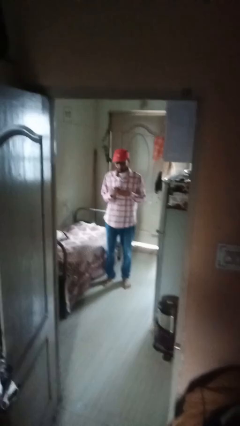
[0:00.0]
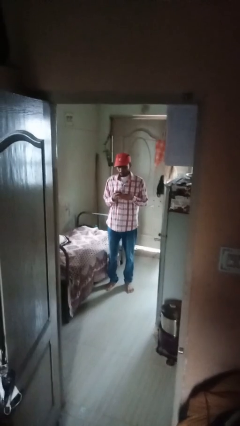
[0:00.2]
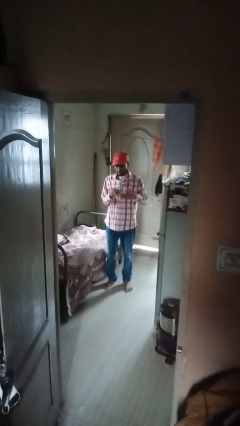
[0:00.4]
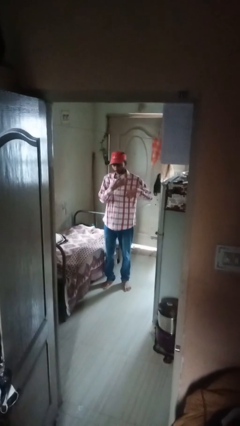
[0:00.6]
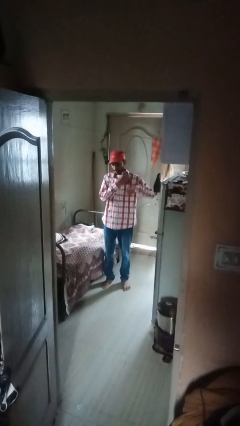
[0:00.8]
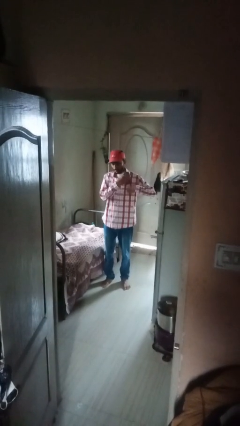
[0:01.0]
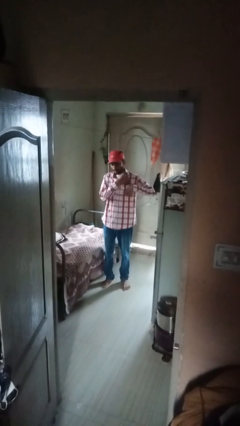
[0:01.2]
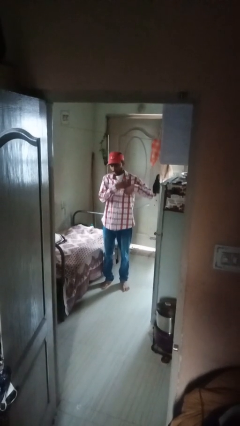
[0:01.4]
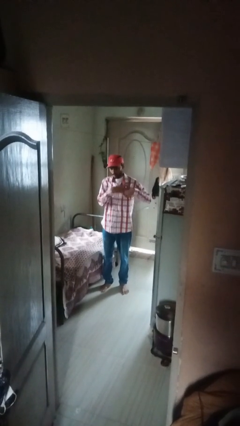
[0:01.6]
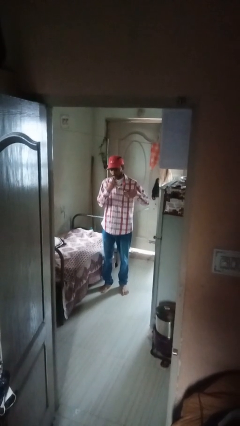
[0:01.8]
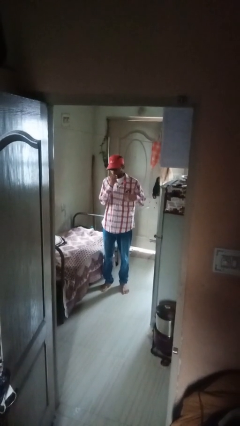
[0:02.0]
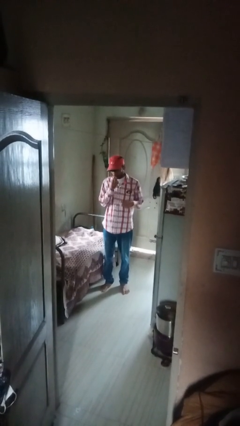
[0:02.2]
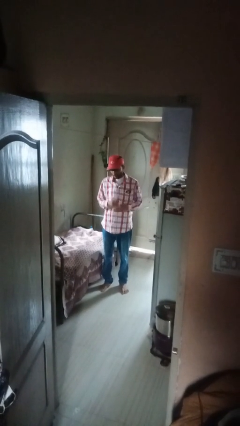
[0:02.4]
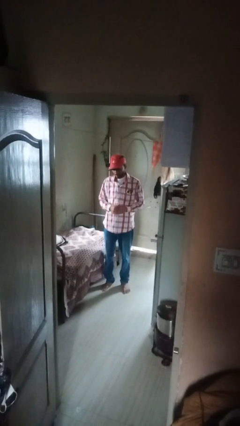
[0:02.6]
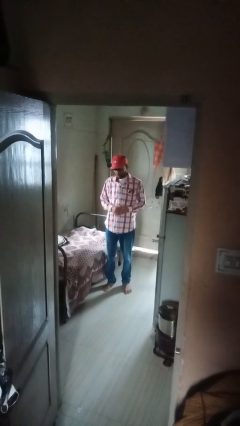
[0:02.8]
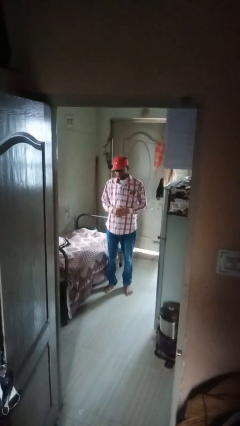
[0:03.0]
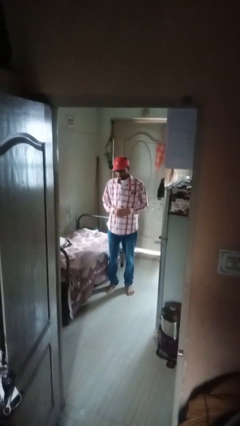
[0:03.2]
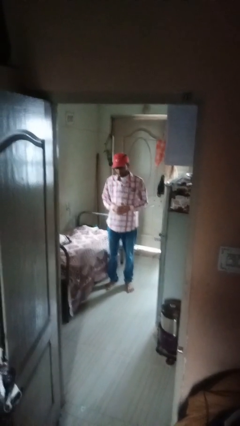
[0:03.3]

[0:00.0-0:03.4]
person puts phone into pocket

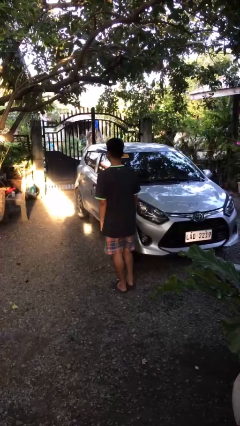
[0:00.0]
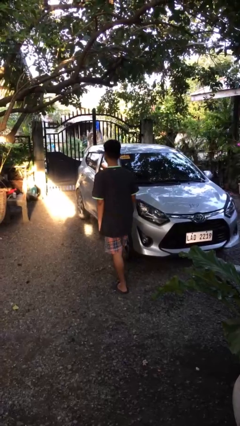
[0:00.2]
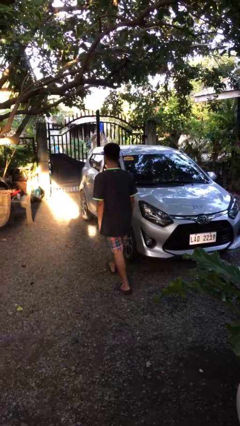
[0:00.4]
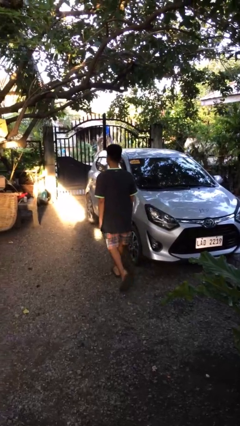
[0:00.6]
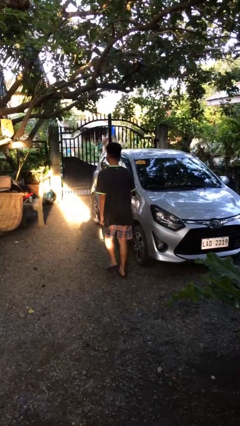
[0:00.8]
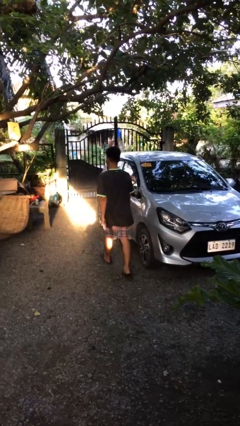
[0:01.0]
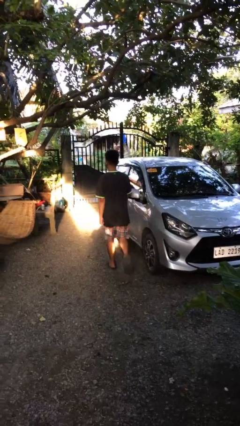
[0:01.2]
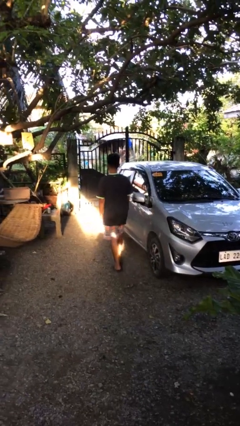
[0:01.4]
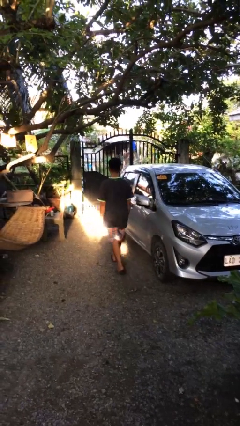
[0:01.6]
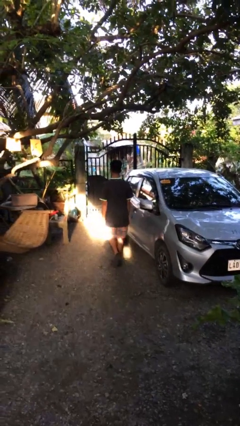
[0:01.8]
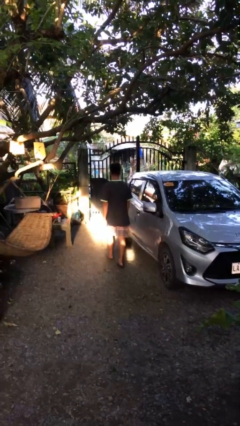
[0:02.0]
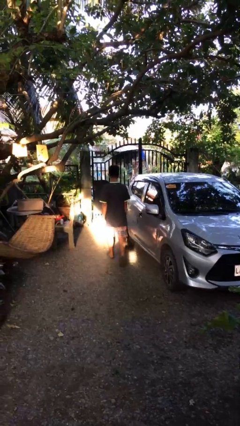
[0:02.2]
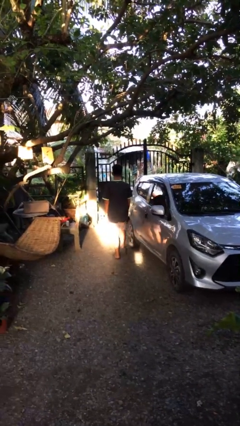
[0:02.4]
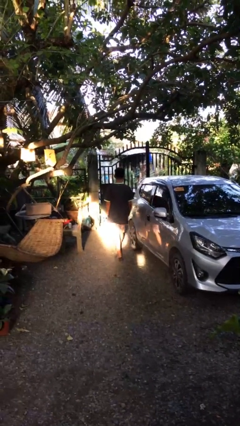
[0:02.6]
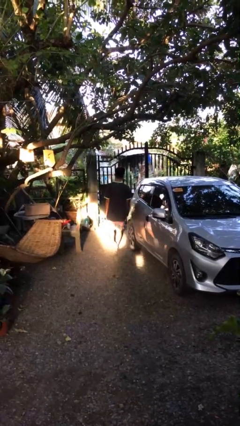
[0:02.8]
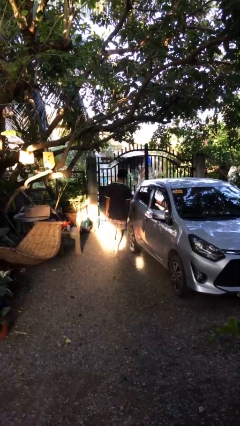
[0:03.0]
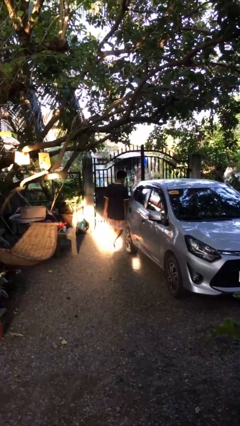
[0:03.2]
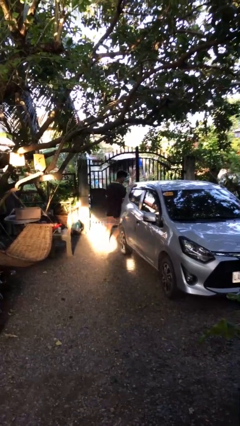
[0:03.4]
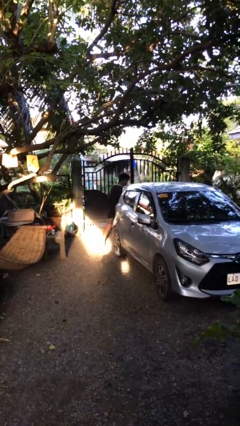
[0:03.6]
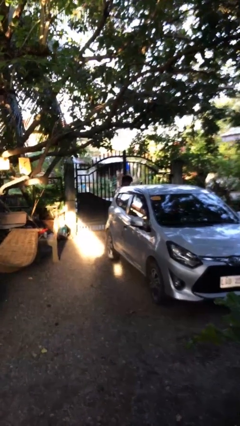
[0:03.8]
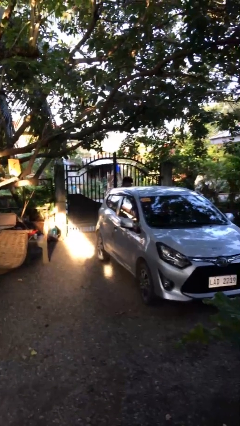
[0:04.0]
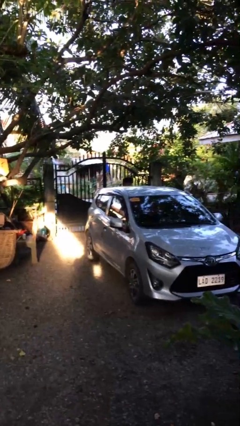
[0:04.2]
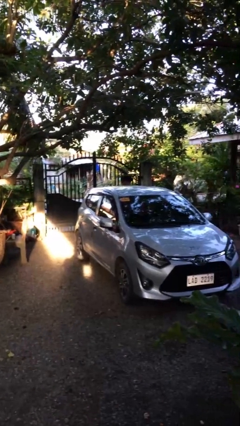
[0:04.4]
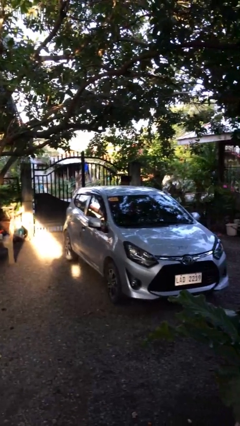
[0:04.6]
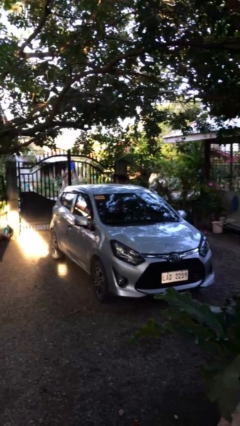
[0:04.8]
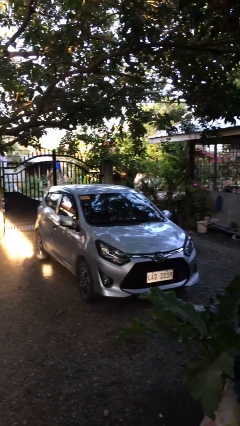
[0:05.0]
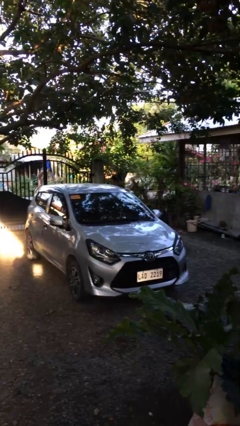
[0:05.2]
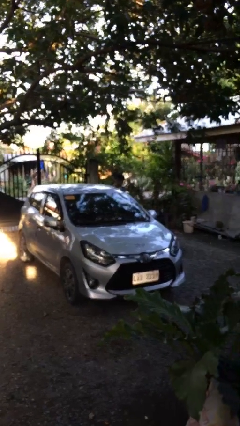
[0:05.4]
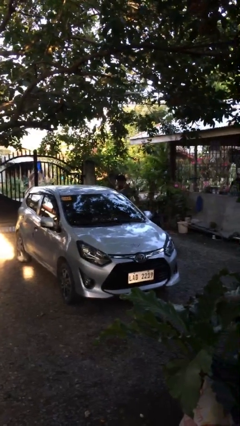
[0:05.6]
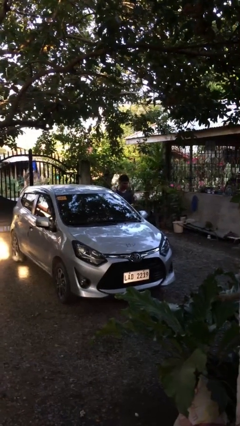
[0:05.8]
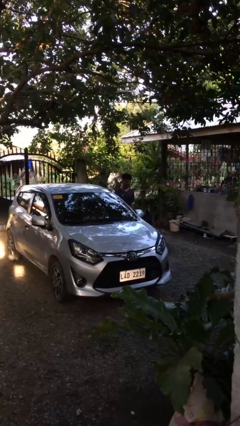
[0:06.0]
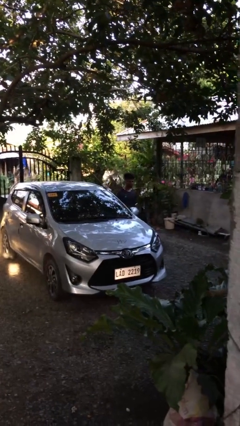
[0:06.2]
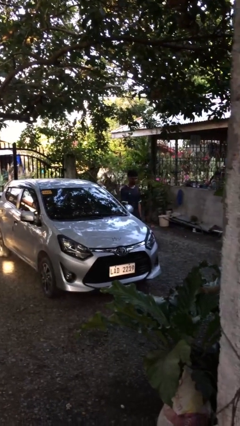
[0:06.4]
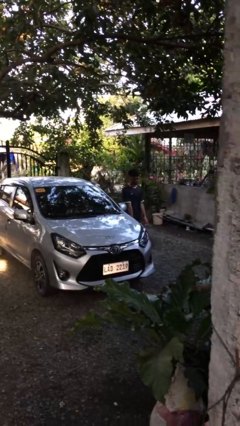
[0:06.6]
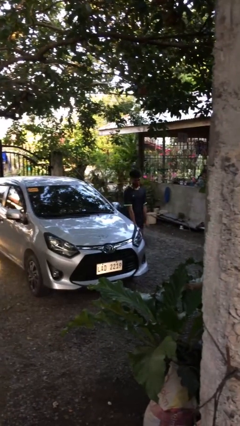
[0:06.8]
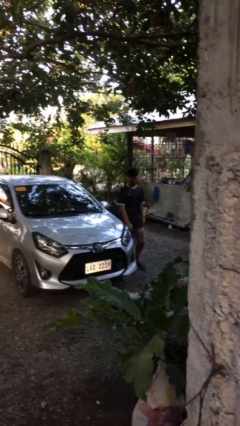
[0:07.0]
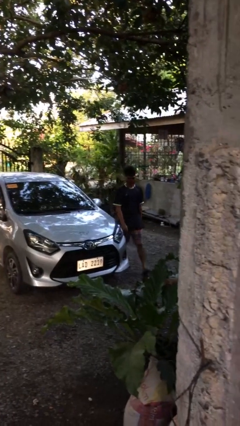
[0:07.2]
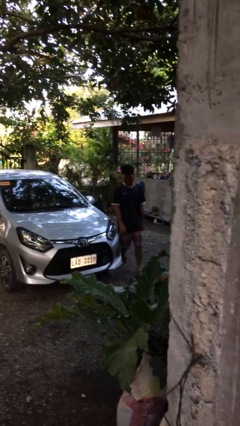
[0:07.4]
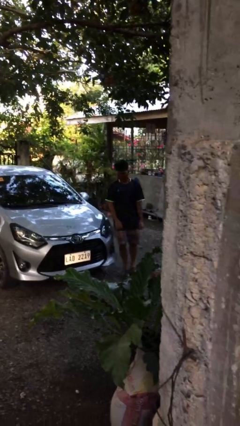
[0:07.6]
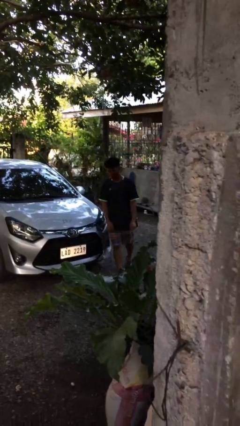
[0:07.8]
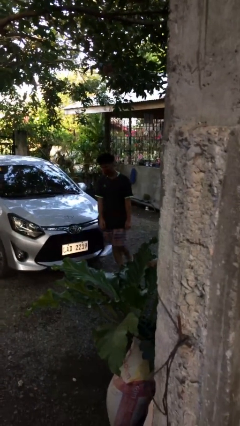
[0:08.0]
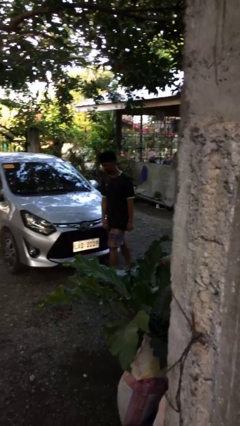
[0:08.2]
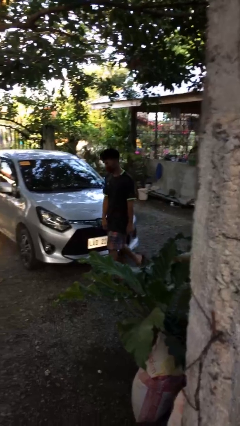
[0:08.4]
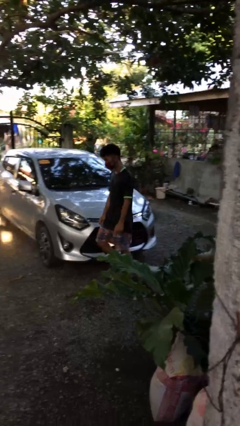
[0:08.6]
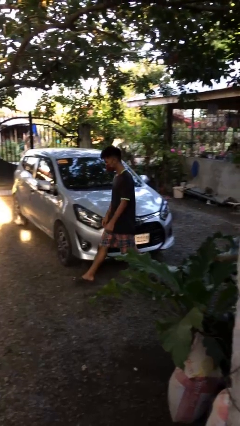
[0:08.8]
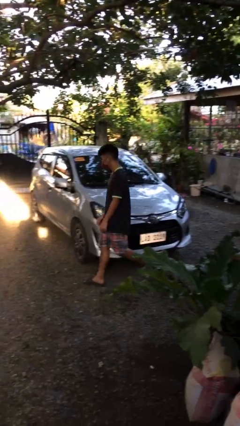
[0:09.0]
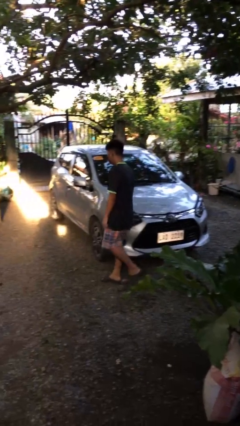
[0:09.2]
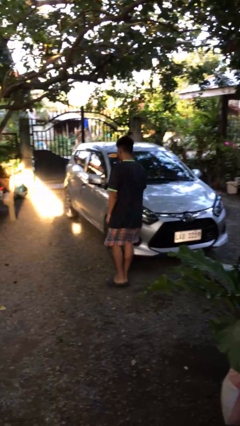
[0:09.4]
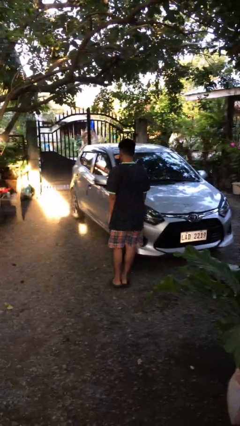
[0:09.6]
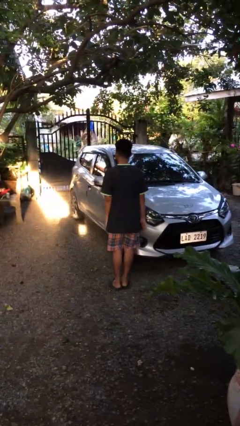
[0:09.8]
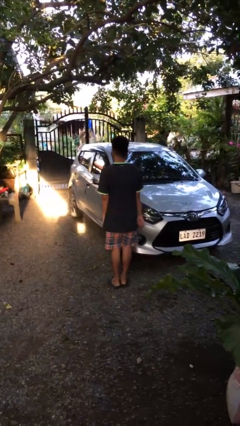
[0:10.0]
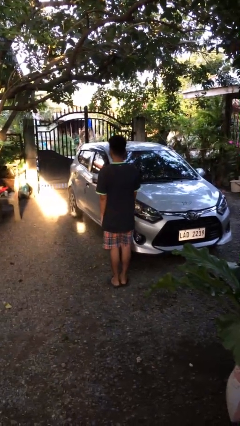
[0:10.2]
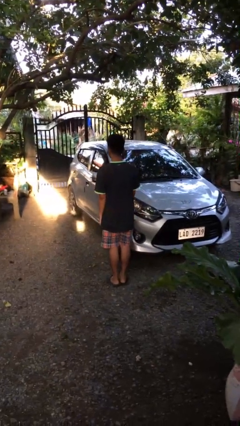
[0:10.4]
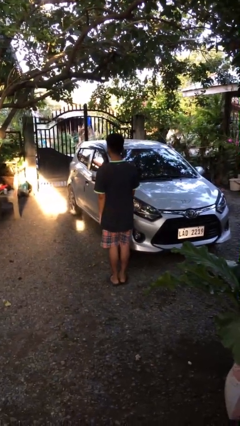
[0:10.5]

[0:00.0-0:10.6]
person walks around car

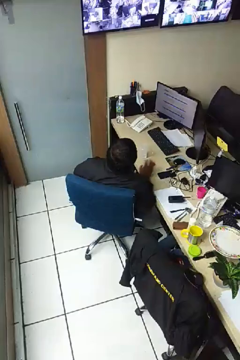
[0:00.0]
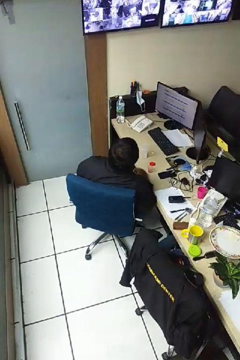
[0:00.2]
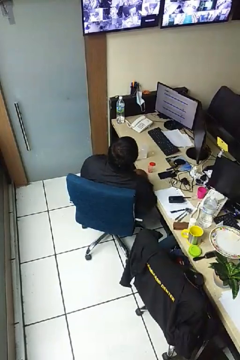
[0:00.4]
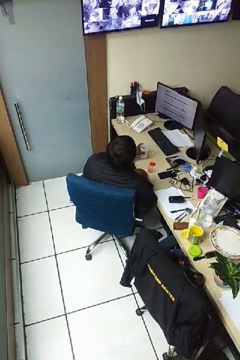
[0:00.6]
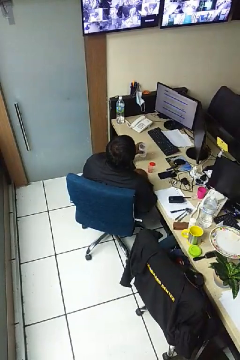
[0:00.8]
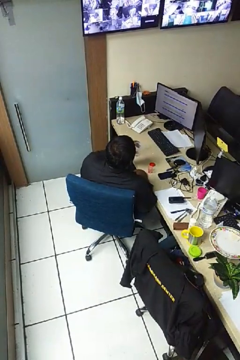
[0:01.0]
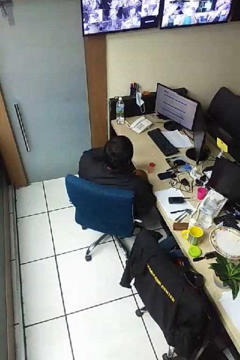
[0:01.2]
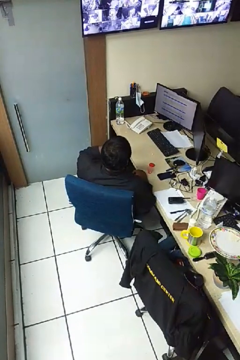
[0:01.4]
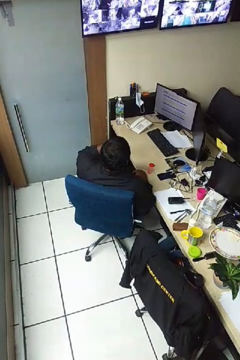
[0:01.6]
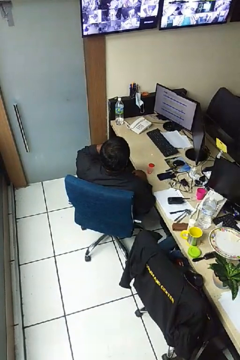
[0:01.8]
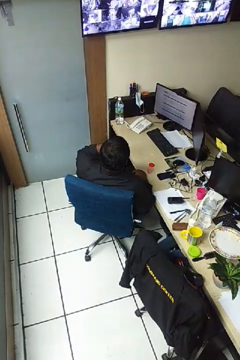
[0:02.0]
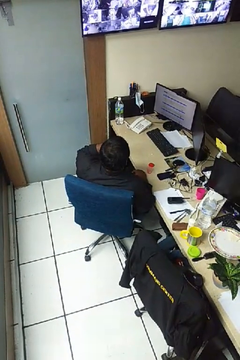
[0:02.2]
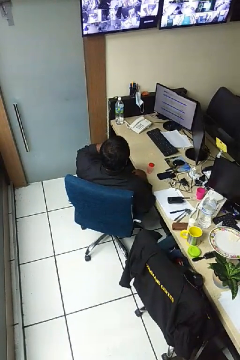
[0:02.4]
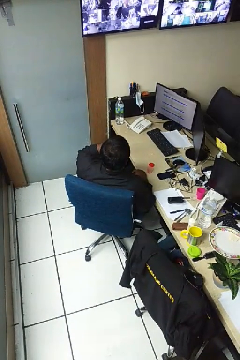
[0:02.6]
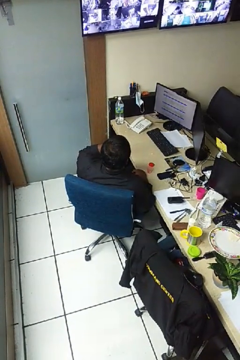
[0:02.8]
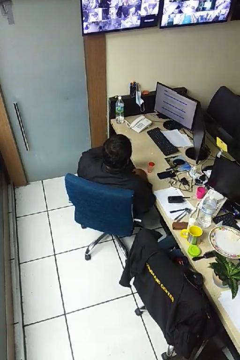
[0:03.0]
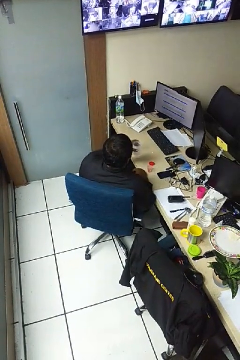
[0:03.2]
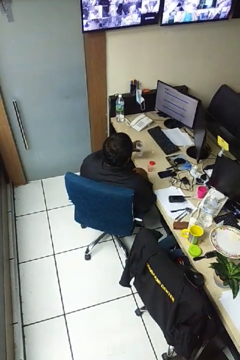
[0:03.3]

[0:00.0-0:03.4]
person drinks from cup

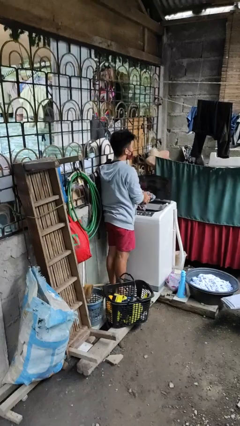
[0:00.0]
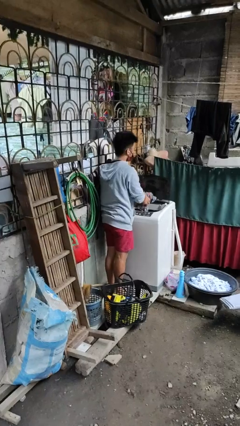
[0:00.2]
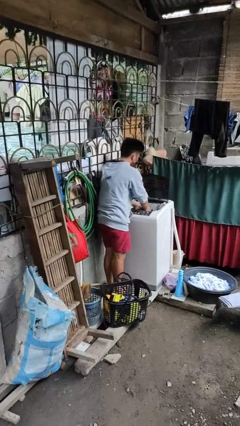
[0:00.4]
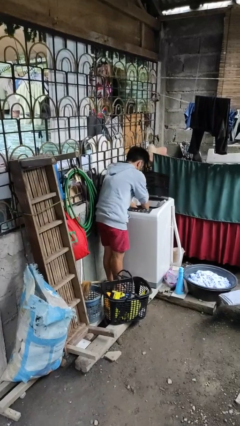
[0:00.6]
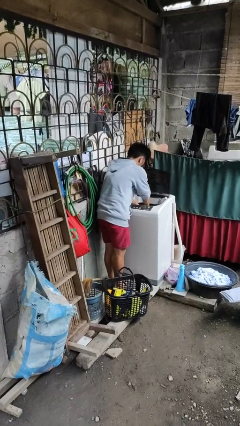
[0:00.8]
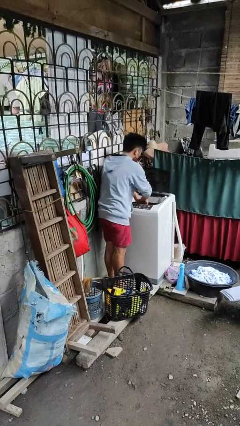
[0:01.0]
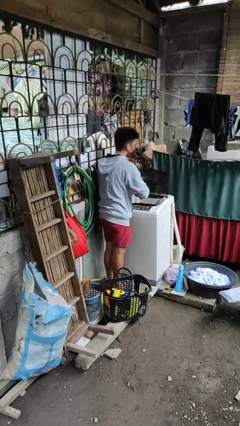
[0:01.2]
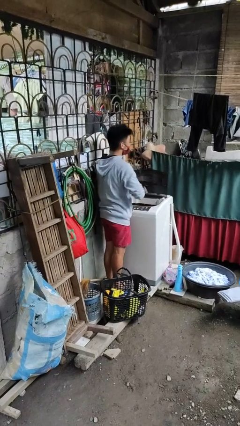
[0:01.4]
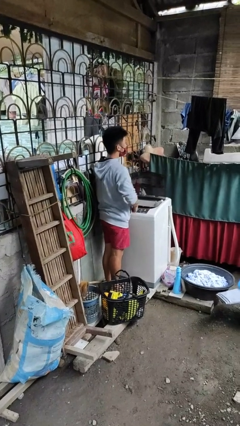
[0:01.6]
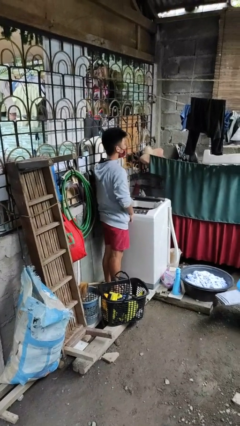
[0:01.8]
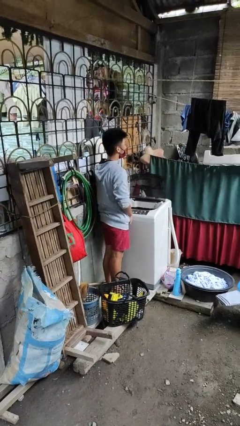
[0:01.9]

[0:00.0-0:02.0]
person loads dryer
